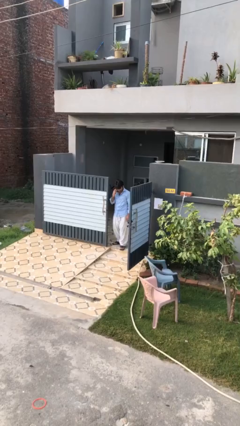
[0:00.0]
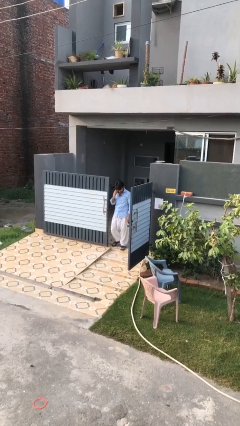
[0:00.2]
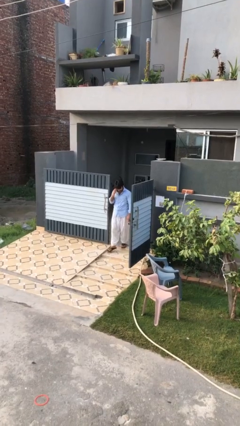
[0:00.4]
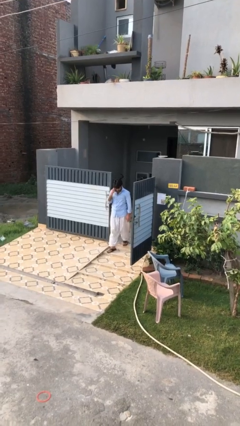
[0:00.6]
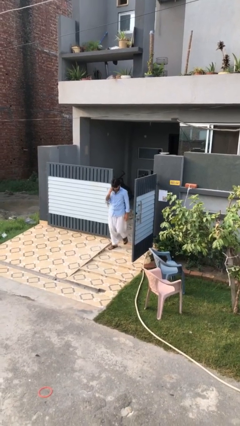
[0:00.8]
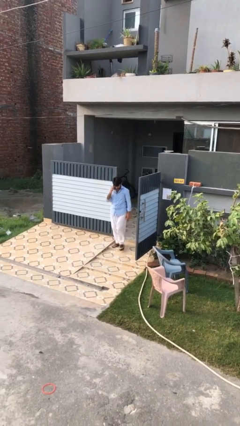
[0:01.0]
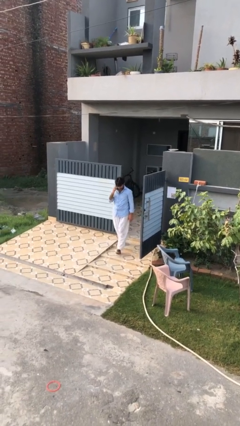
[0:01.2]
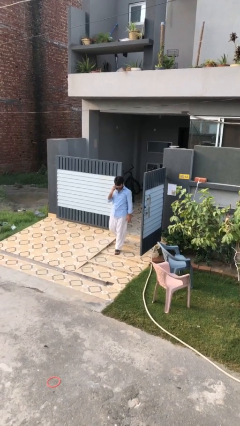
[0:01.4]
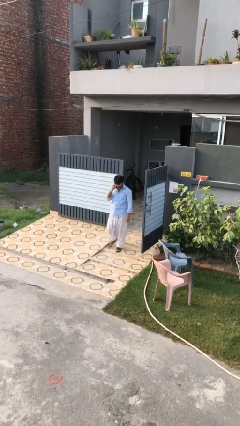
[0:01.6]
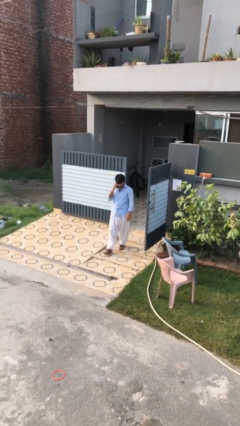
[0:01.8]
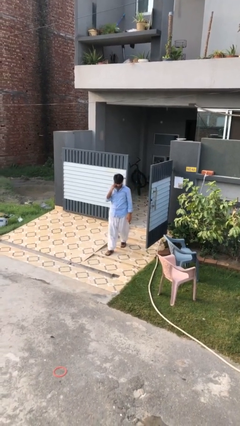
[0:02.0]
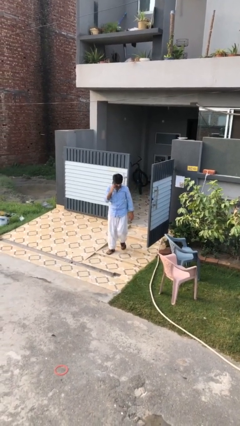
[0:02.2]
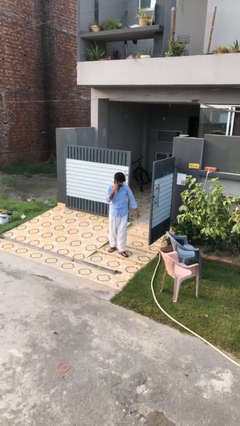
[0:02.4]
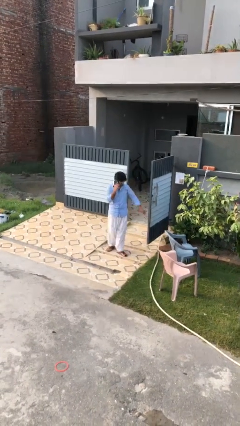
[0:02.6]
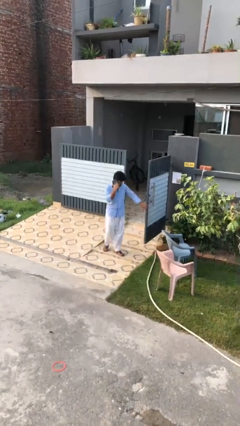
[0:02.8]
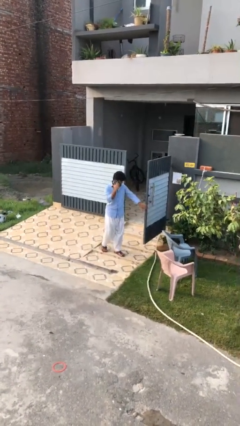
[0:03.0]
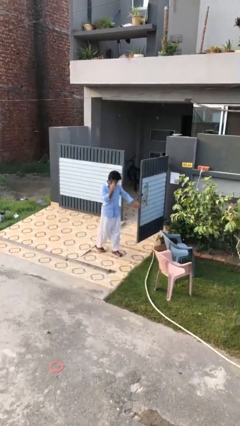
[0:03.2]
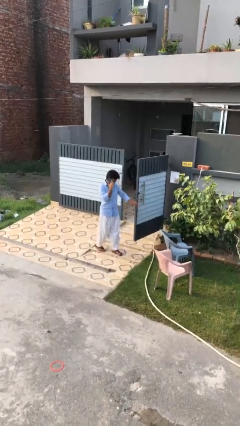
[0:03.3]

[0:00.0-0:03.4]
person enters scene through structure

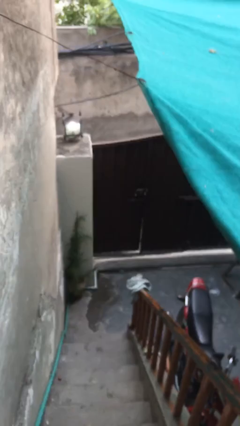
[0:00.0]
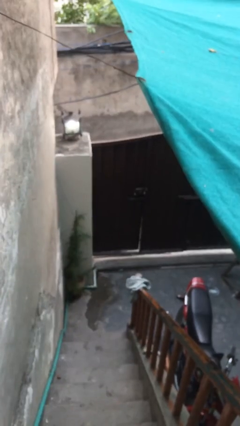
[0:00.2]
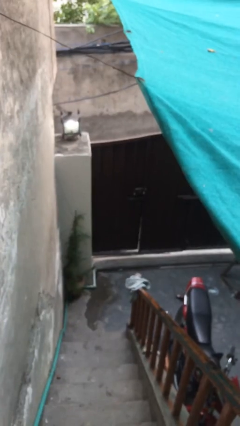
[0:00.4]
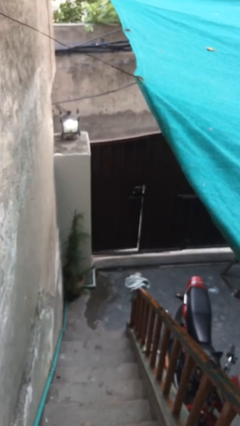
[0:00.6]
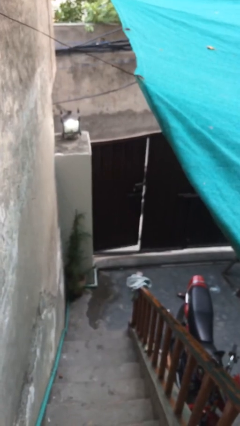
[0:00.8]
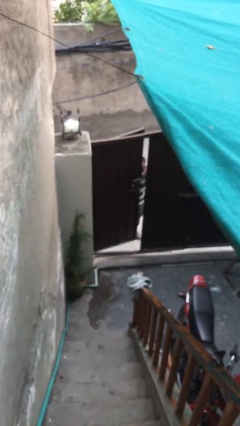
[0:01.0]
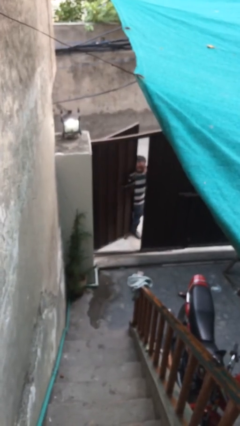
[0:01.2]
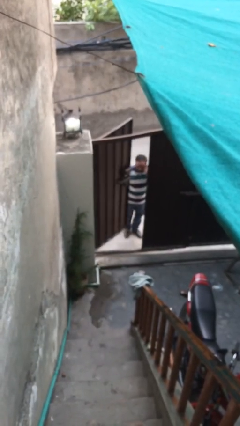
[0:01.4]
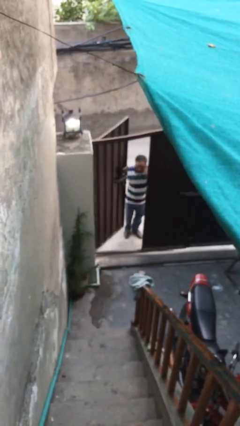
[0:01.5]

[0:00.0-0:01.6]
person opens facility door

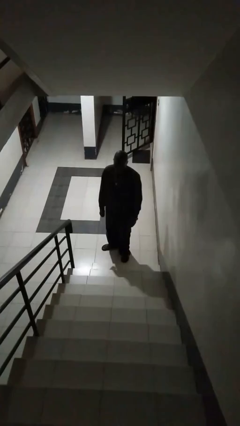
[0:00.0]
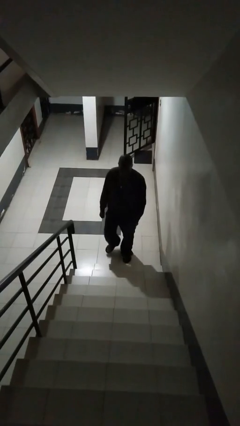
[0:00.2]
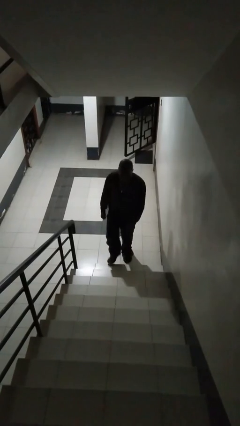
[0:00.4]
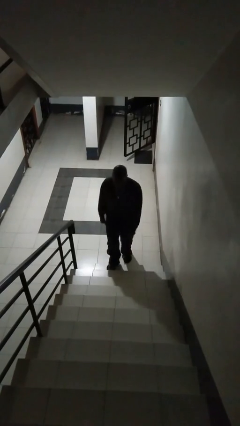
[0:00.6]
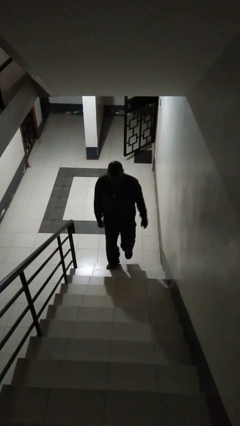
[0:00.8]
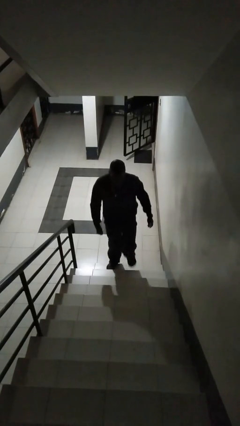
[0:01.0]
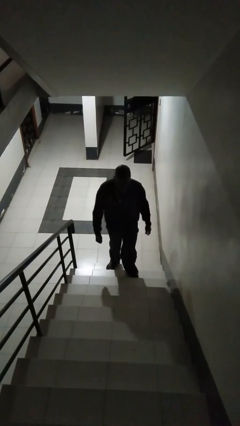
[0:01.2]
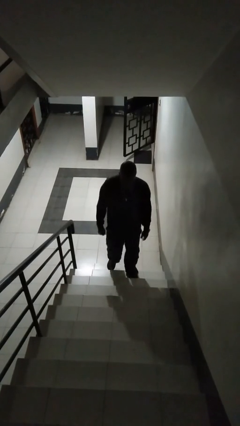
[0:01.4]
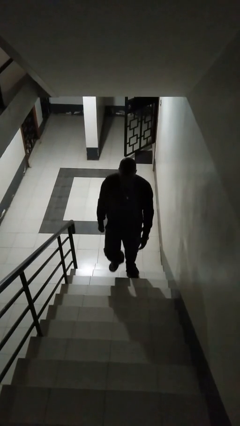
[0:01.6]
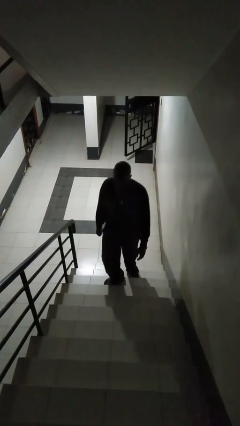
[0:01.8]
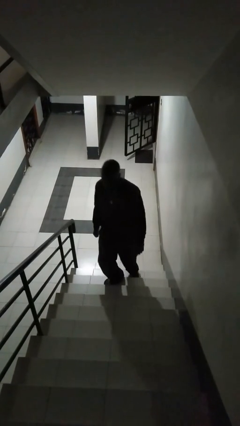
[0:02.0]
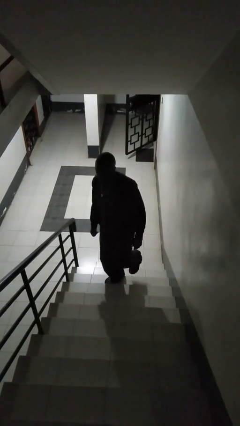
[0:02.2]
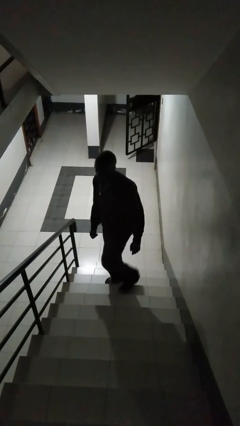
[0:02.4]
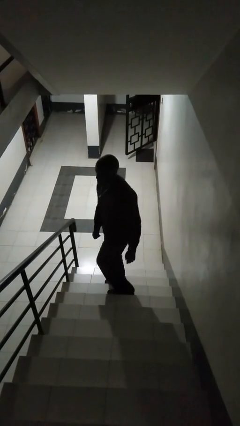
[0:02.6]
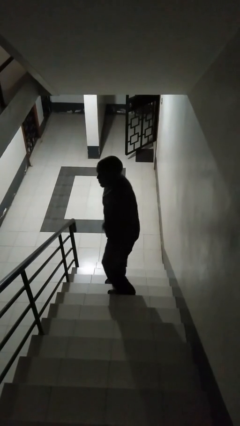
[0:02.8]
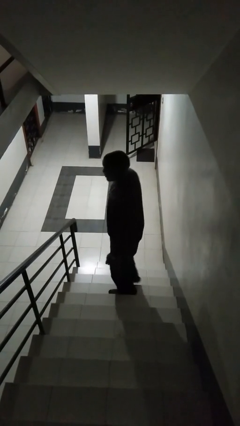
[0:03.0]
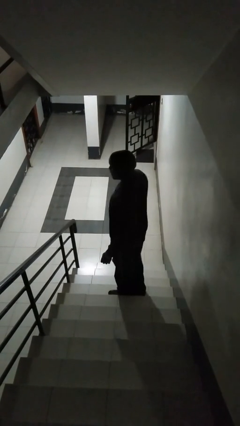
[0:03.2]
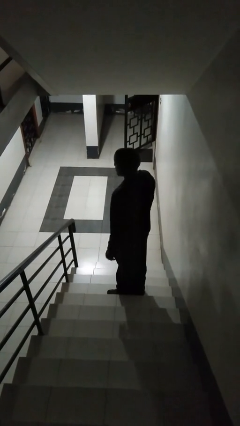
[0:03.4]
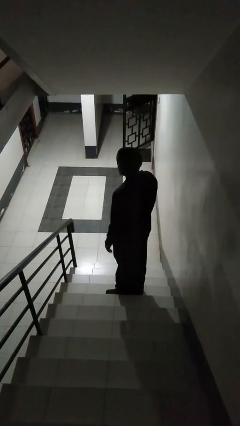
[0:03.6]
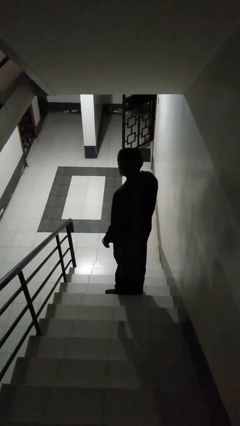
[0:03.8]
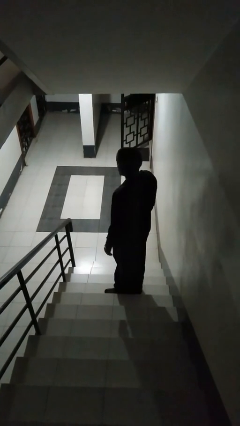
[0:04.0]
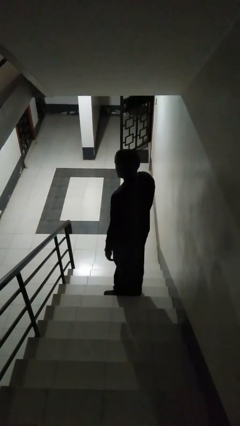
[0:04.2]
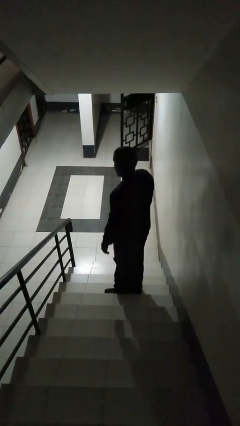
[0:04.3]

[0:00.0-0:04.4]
person climbs up stairs

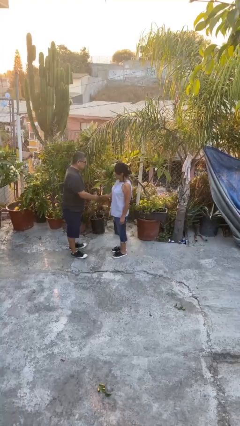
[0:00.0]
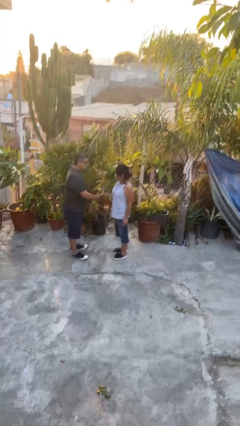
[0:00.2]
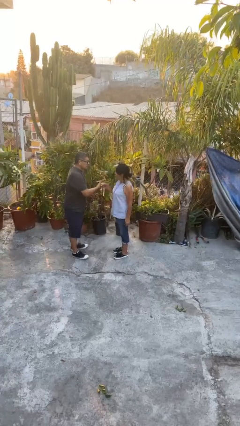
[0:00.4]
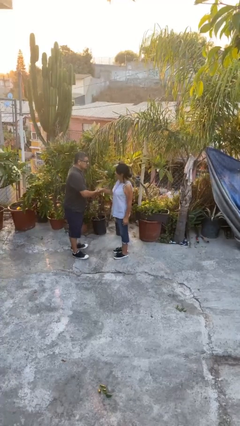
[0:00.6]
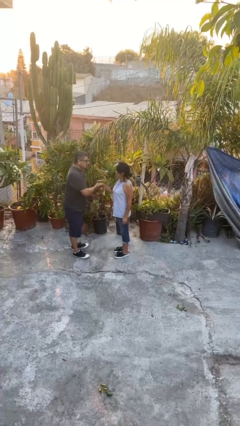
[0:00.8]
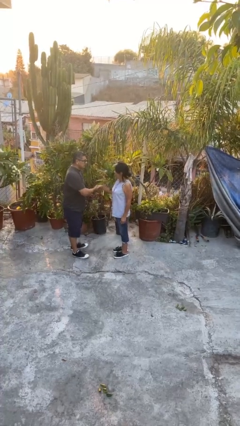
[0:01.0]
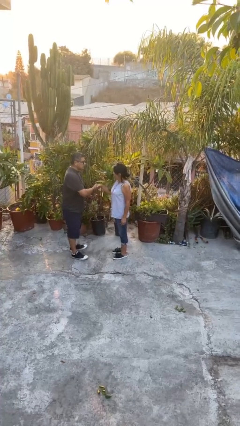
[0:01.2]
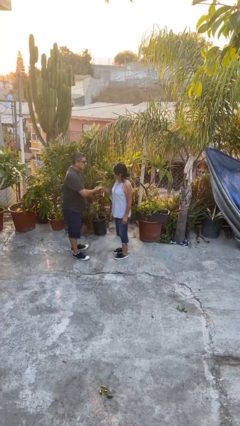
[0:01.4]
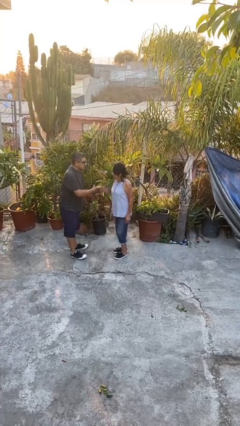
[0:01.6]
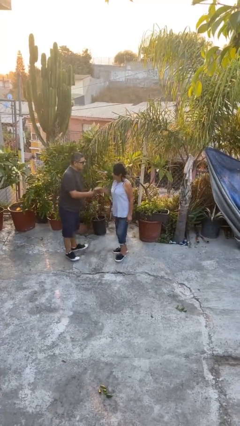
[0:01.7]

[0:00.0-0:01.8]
person shakes hand

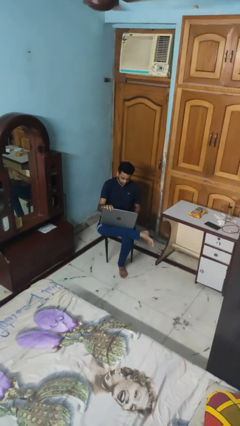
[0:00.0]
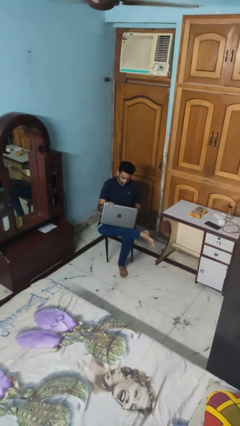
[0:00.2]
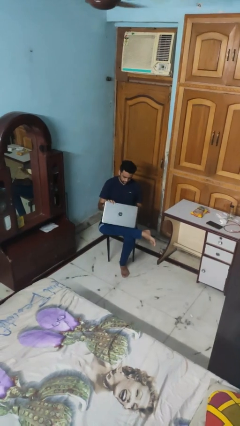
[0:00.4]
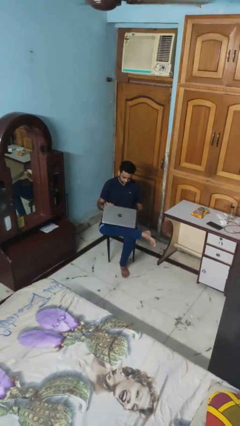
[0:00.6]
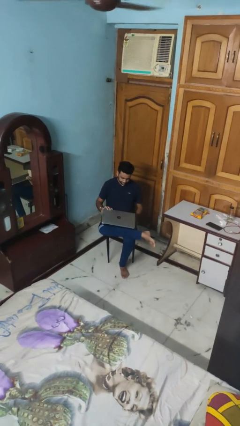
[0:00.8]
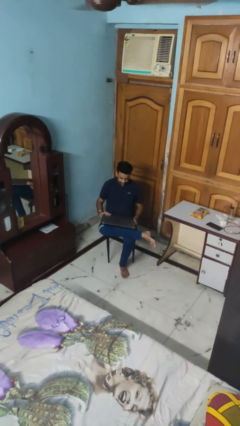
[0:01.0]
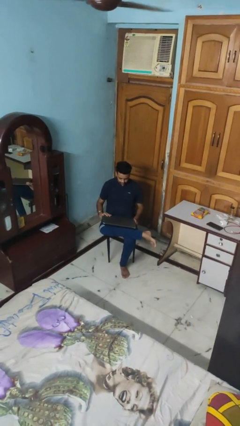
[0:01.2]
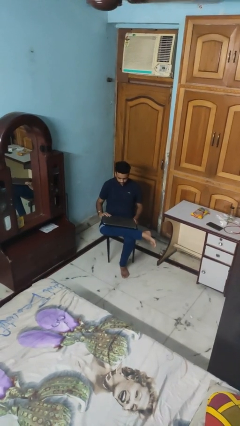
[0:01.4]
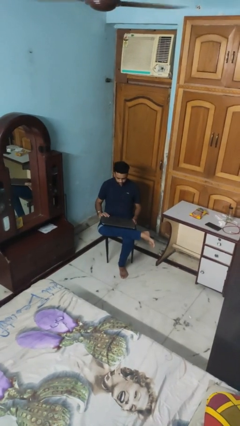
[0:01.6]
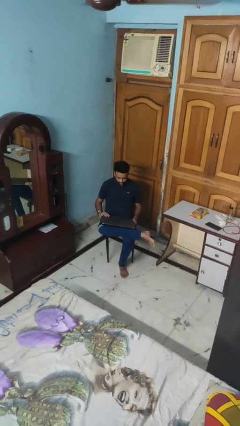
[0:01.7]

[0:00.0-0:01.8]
person closes laptop

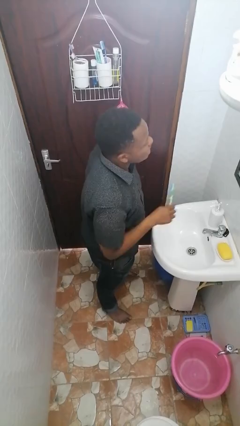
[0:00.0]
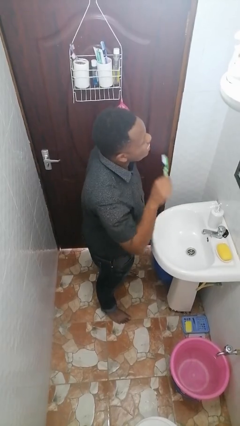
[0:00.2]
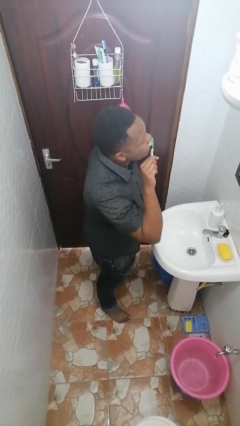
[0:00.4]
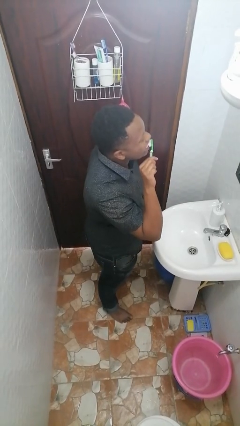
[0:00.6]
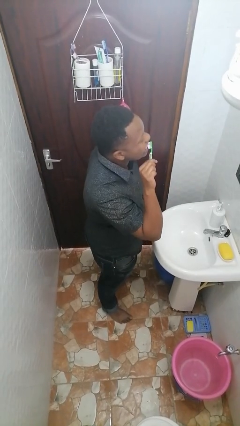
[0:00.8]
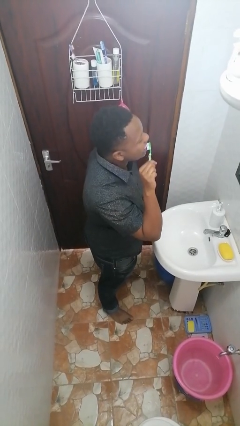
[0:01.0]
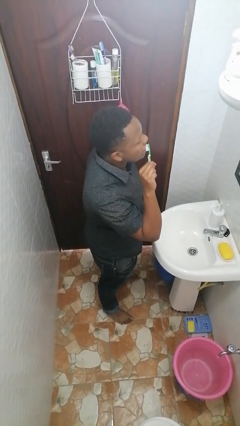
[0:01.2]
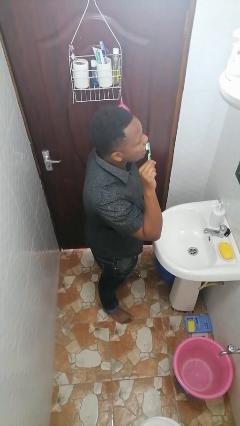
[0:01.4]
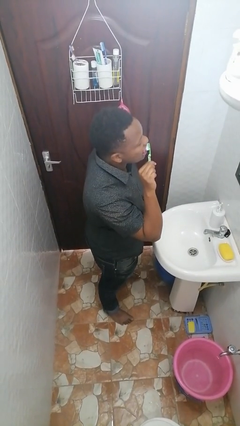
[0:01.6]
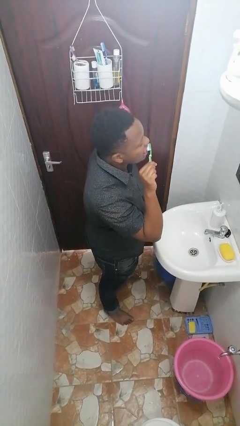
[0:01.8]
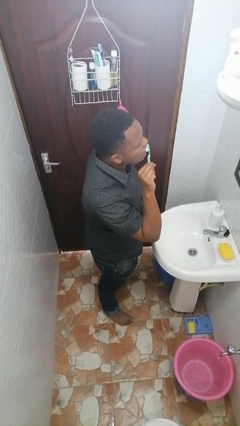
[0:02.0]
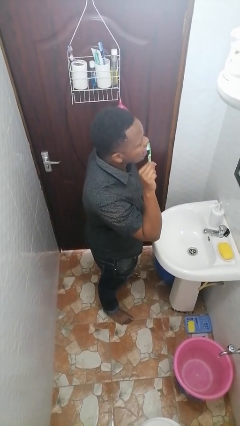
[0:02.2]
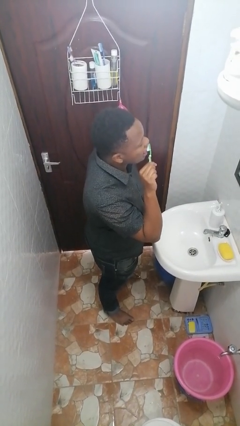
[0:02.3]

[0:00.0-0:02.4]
person brushes teeth

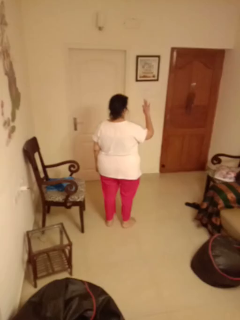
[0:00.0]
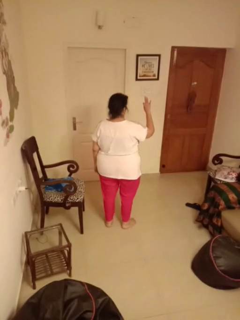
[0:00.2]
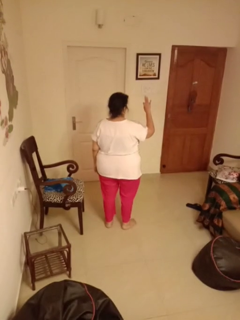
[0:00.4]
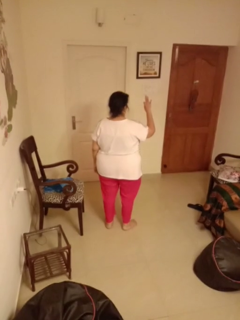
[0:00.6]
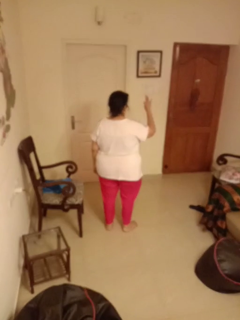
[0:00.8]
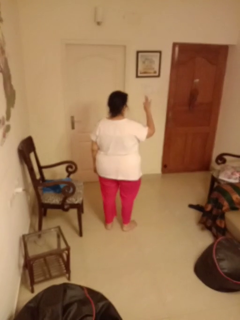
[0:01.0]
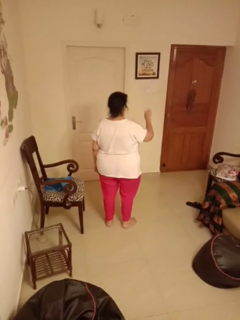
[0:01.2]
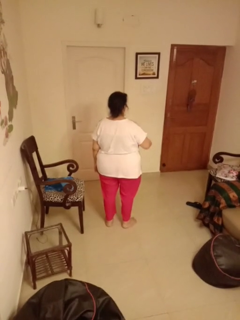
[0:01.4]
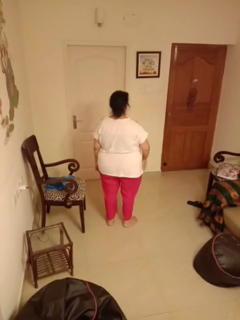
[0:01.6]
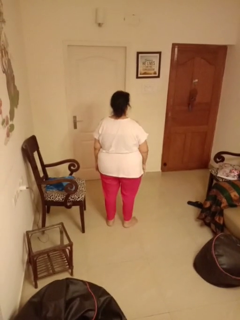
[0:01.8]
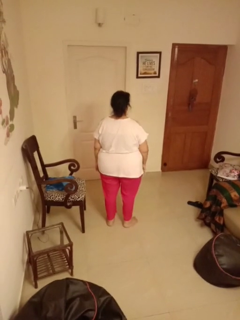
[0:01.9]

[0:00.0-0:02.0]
person gestures number three

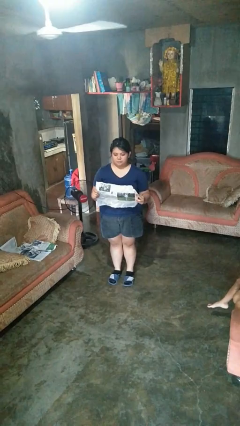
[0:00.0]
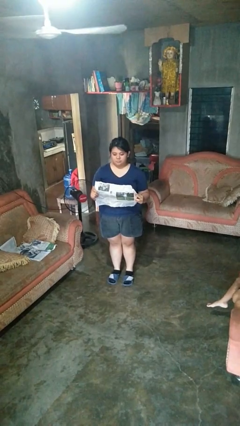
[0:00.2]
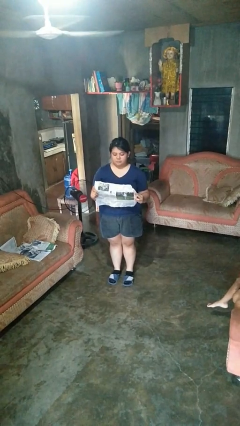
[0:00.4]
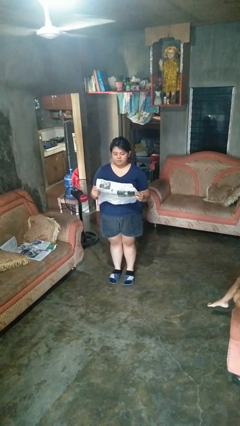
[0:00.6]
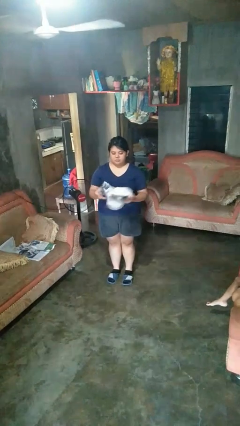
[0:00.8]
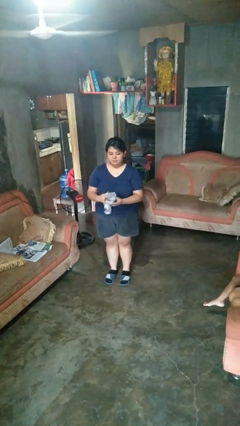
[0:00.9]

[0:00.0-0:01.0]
person crumples paper
